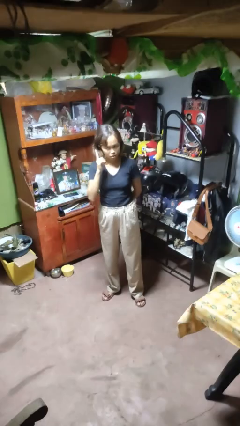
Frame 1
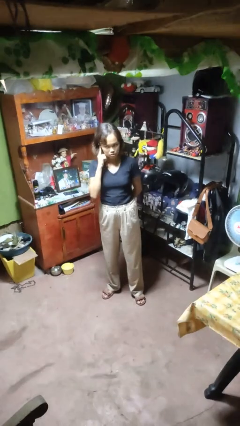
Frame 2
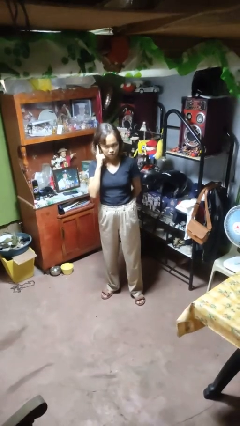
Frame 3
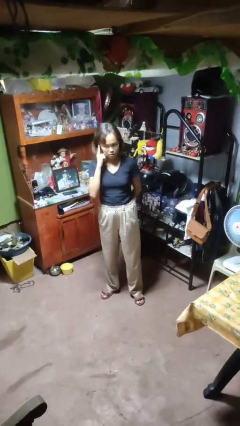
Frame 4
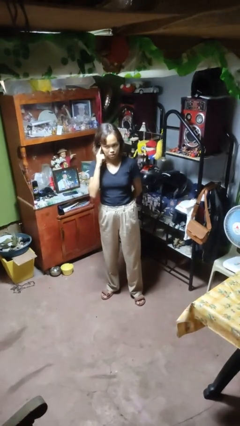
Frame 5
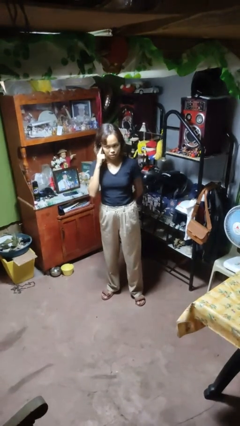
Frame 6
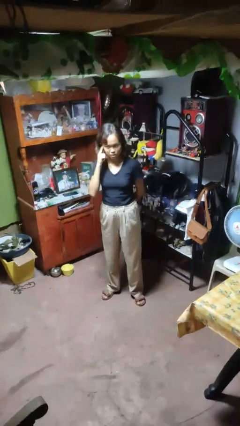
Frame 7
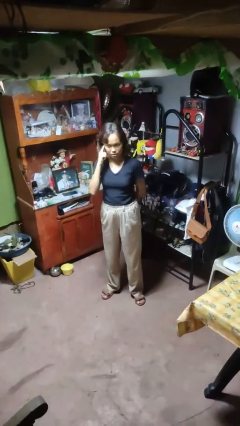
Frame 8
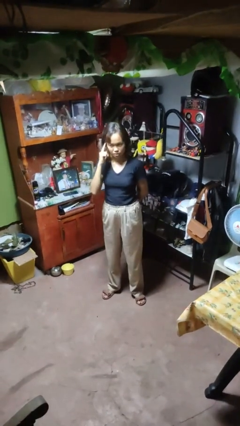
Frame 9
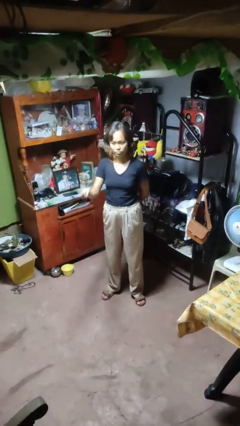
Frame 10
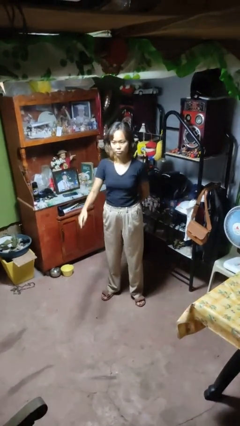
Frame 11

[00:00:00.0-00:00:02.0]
person gestures listen closely

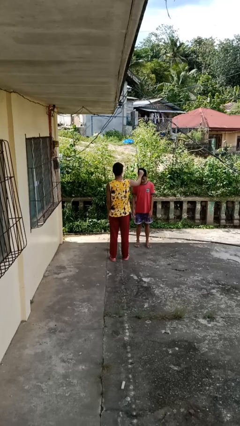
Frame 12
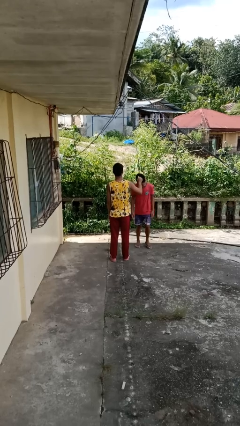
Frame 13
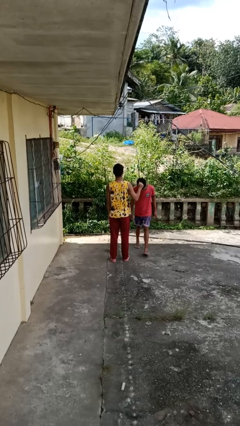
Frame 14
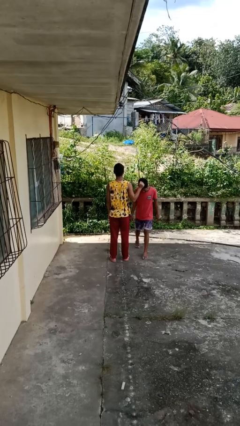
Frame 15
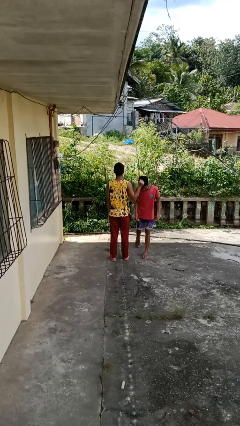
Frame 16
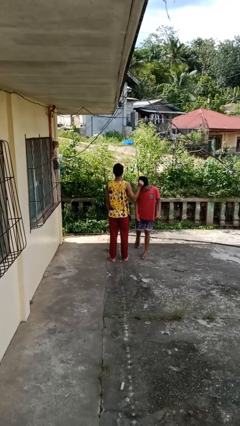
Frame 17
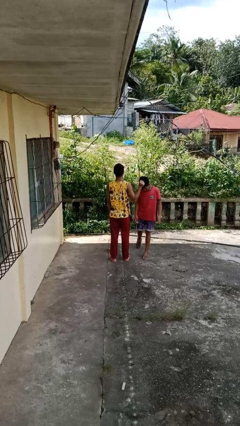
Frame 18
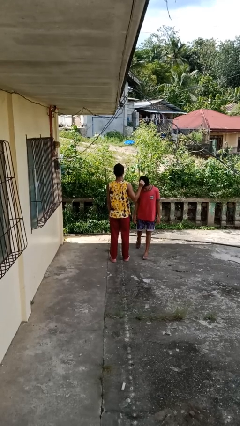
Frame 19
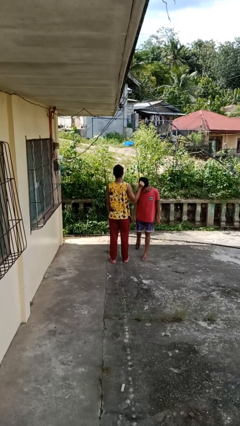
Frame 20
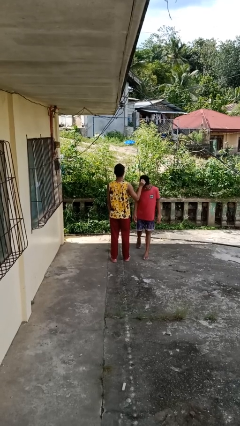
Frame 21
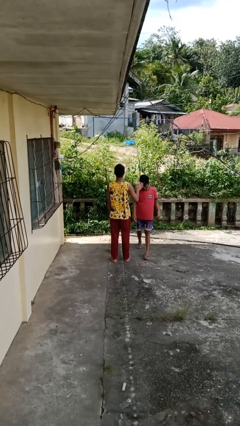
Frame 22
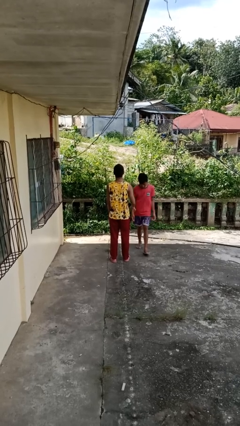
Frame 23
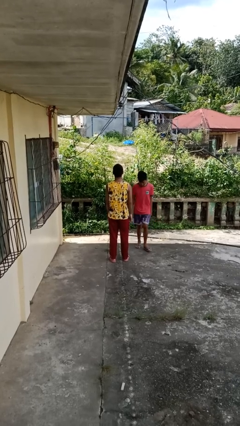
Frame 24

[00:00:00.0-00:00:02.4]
person grabs person by hair

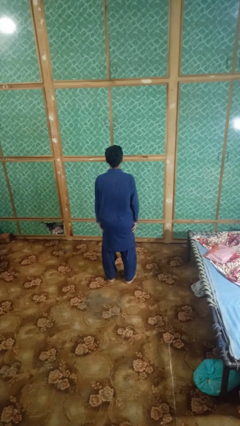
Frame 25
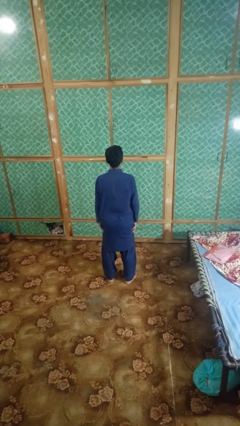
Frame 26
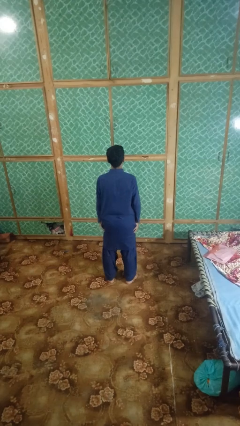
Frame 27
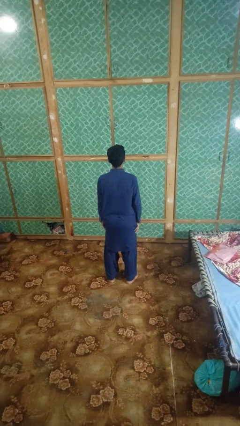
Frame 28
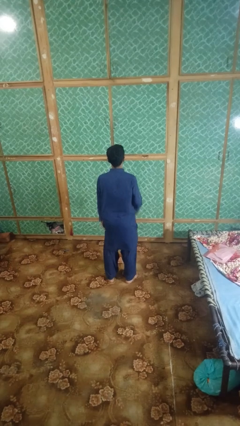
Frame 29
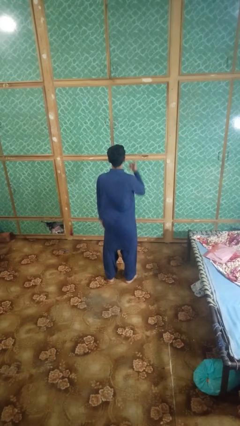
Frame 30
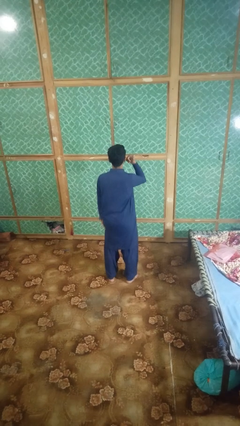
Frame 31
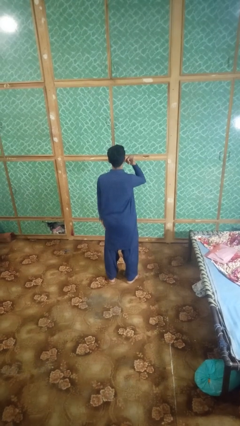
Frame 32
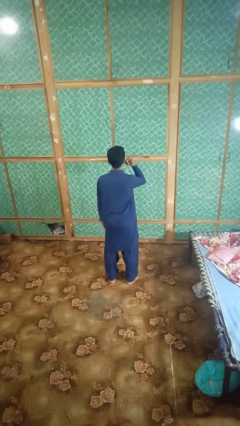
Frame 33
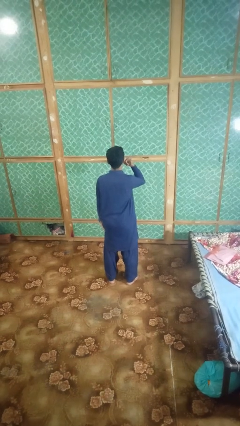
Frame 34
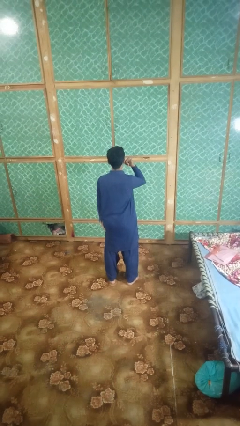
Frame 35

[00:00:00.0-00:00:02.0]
person gestures call me

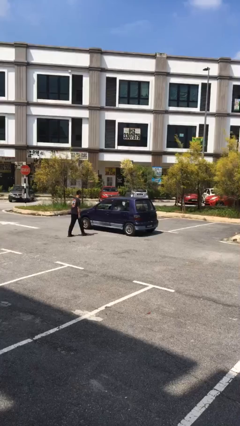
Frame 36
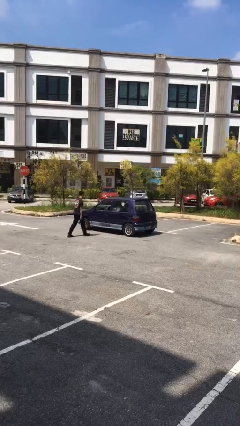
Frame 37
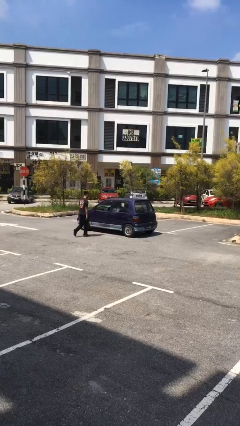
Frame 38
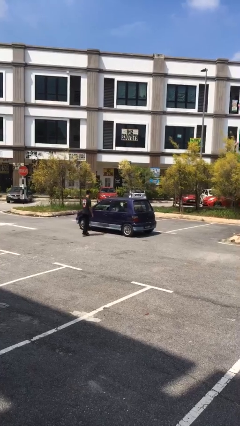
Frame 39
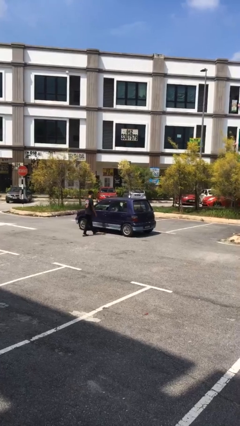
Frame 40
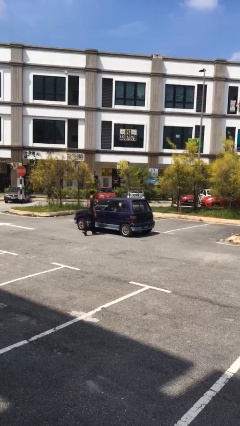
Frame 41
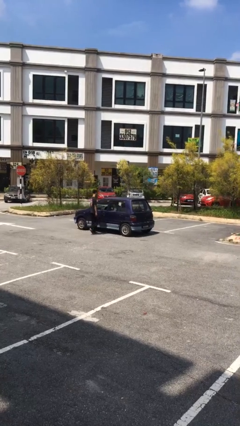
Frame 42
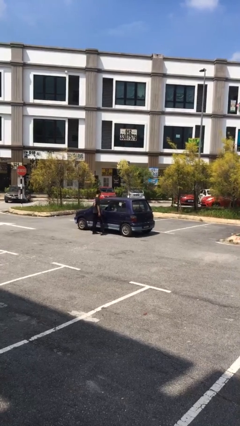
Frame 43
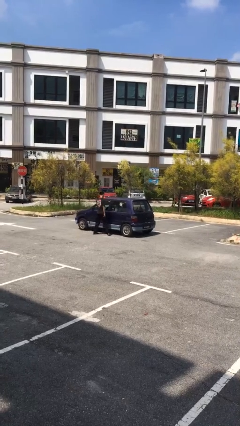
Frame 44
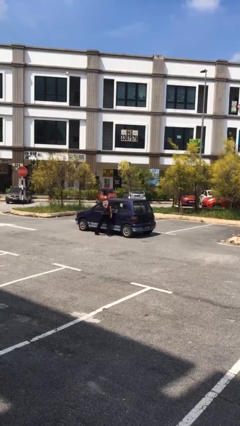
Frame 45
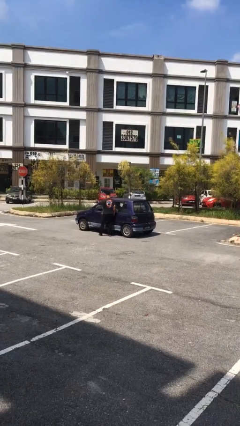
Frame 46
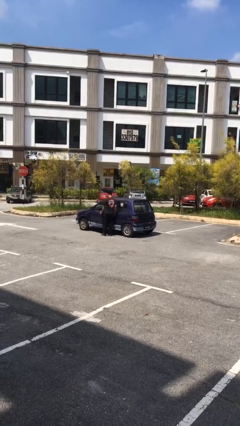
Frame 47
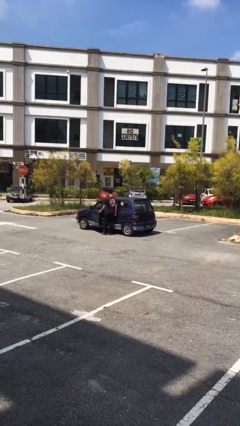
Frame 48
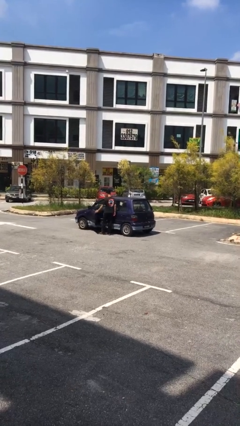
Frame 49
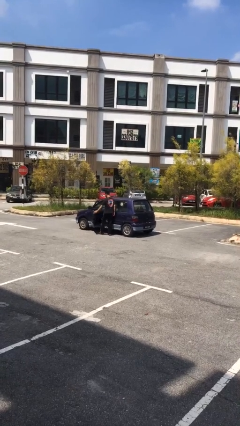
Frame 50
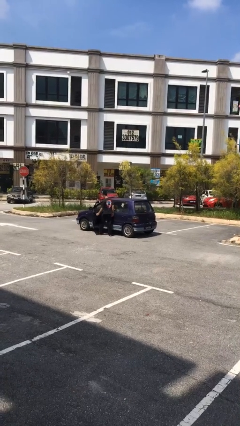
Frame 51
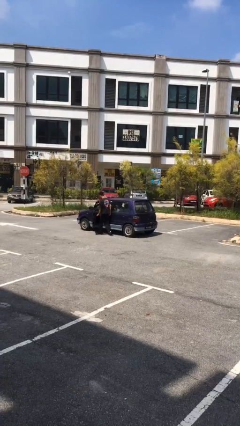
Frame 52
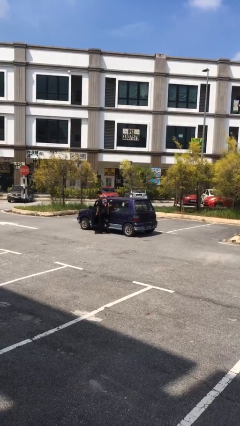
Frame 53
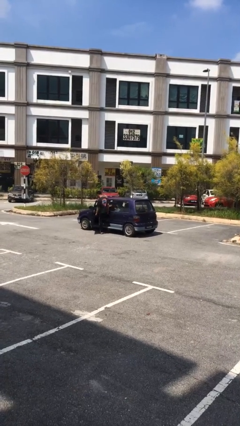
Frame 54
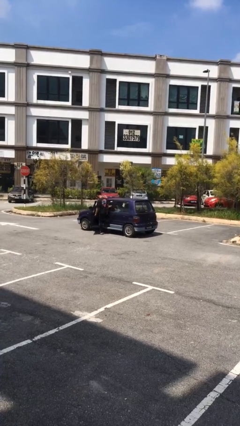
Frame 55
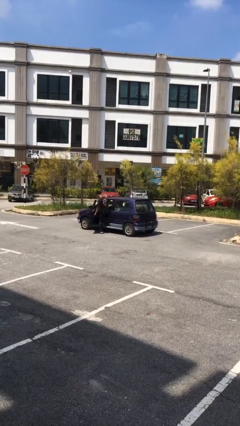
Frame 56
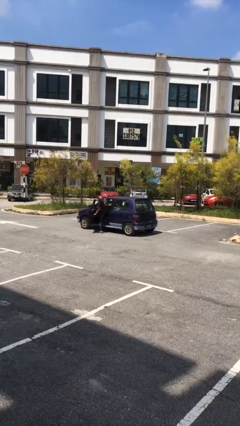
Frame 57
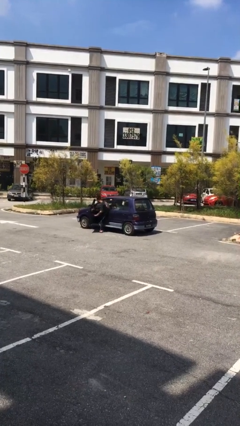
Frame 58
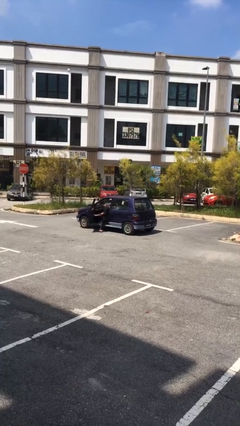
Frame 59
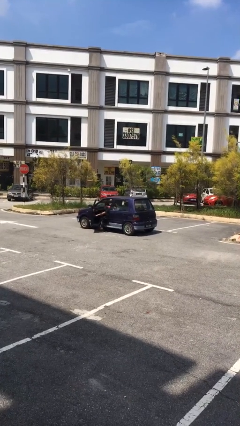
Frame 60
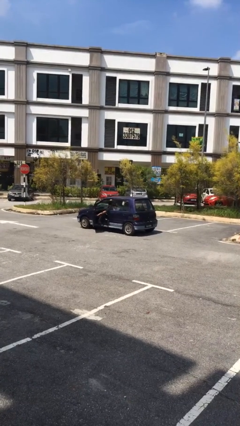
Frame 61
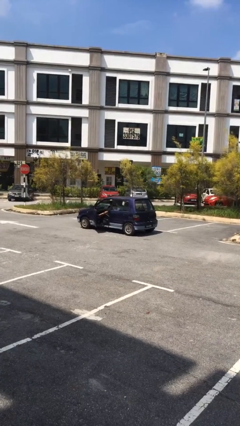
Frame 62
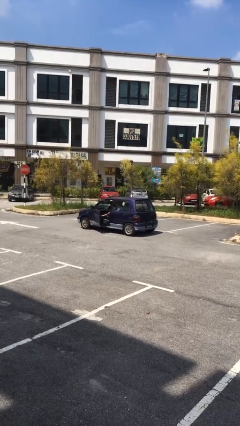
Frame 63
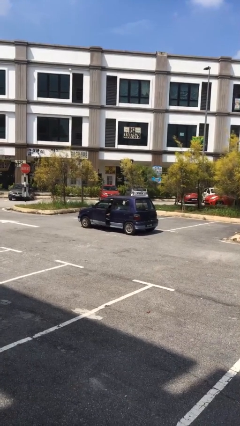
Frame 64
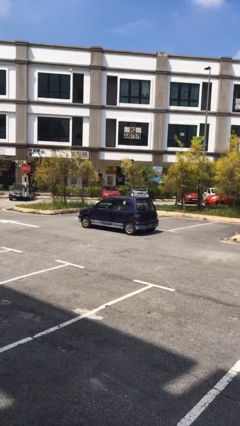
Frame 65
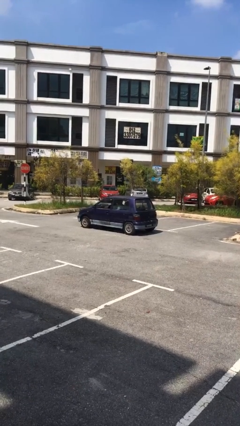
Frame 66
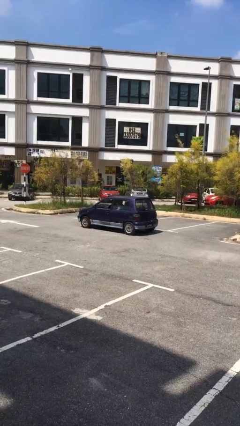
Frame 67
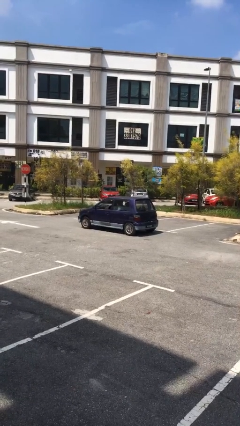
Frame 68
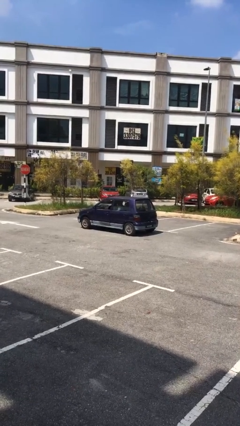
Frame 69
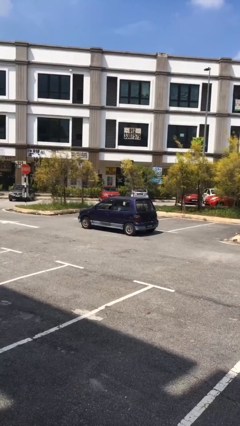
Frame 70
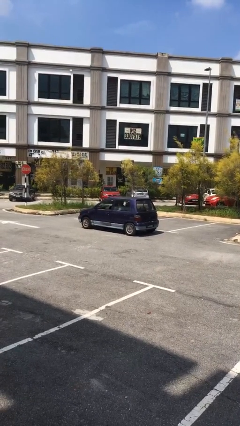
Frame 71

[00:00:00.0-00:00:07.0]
car picks up person

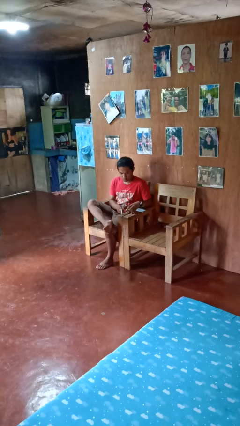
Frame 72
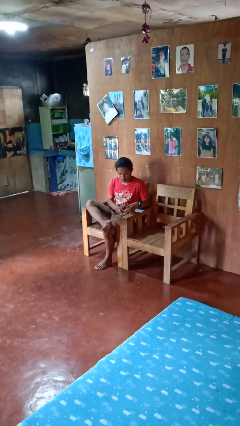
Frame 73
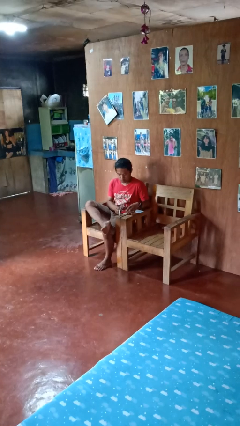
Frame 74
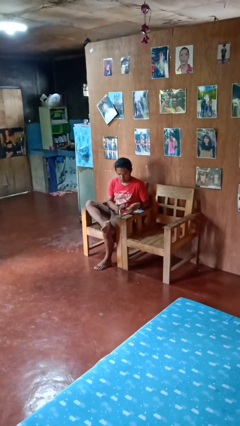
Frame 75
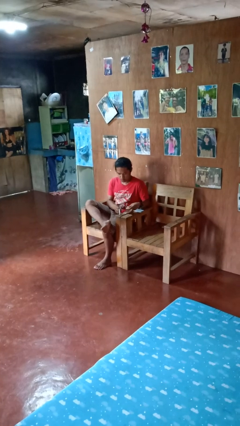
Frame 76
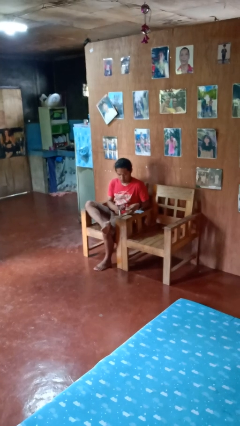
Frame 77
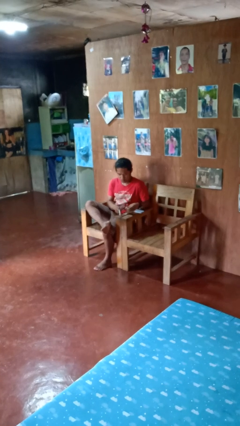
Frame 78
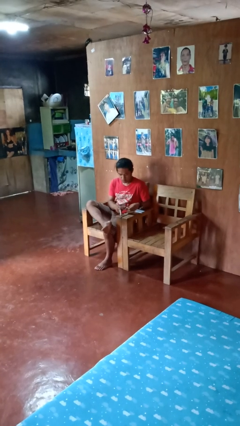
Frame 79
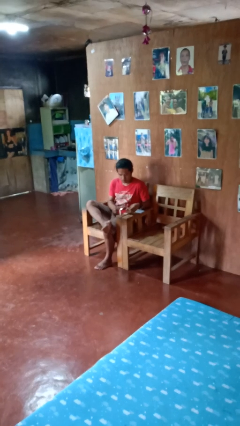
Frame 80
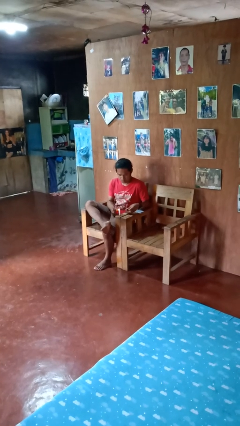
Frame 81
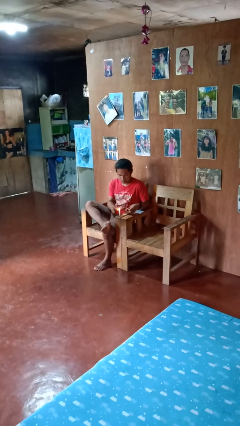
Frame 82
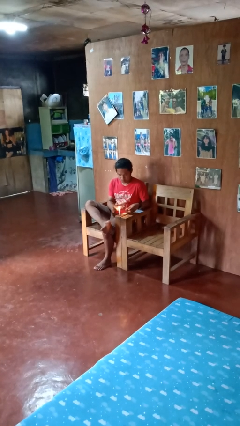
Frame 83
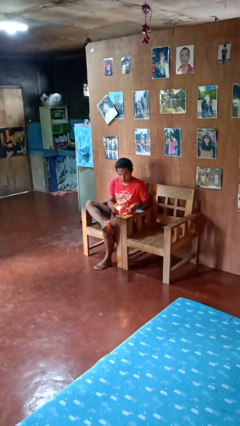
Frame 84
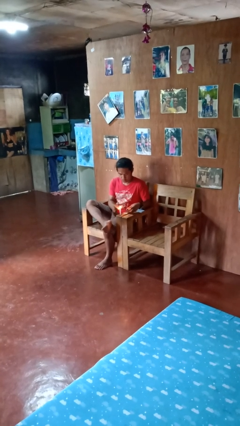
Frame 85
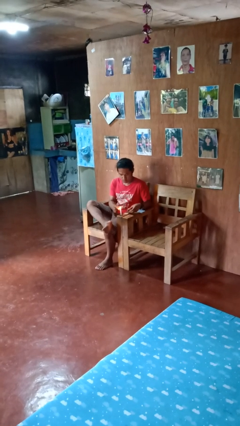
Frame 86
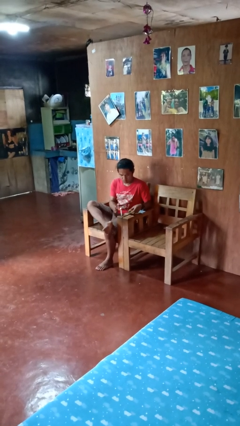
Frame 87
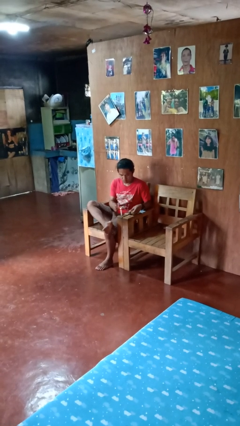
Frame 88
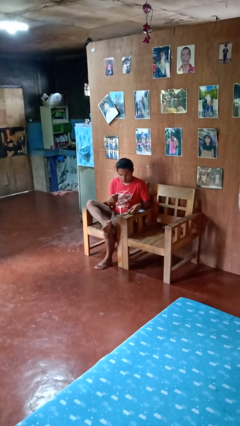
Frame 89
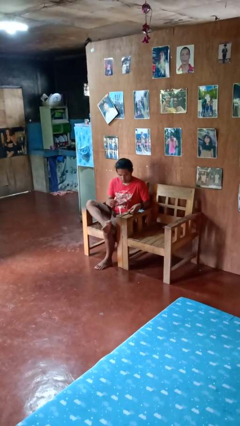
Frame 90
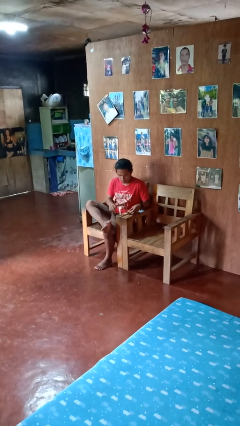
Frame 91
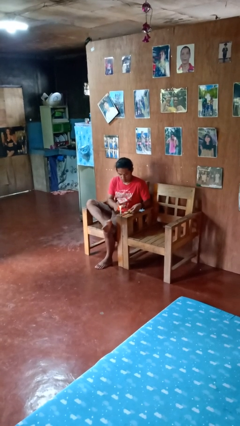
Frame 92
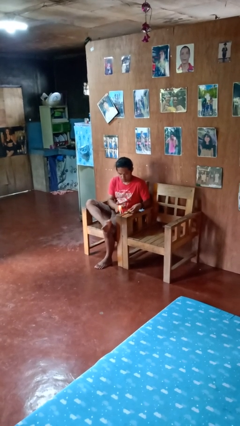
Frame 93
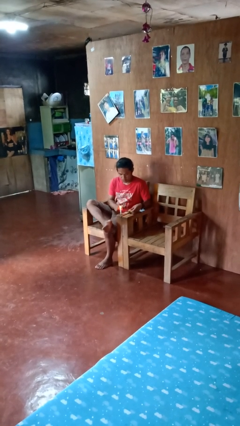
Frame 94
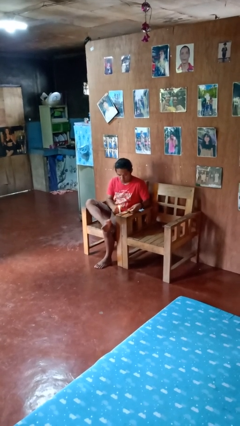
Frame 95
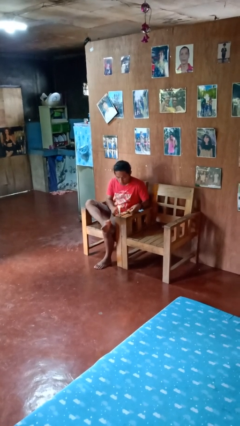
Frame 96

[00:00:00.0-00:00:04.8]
person lights candle
